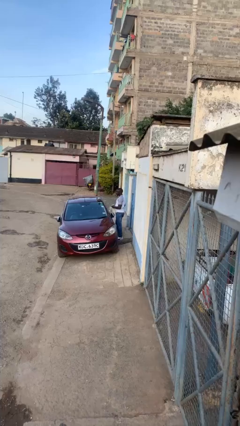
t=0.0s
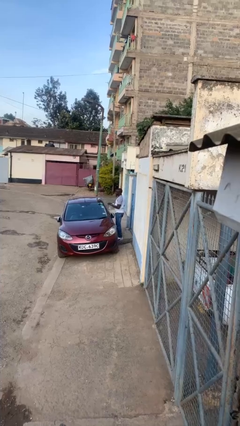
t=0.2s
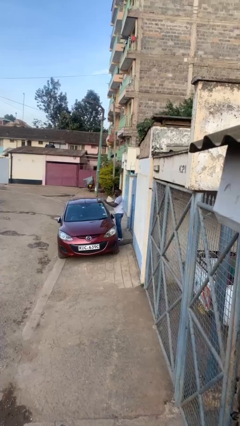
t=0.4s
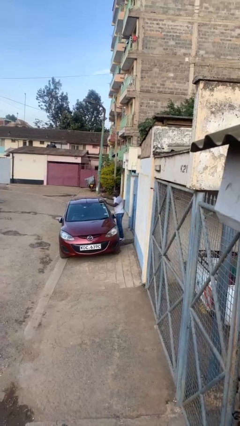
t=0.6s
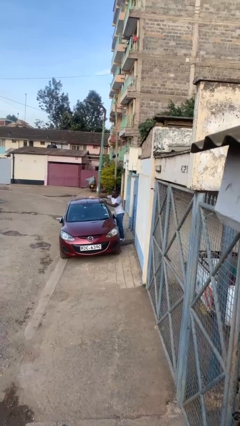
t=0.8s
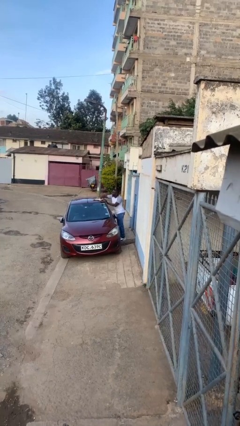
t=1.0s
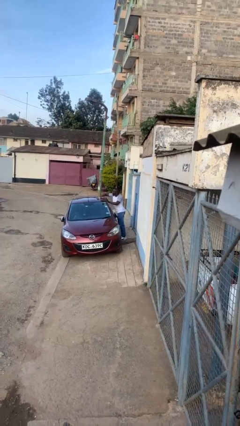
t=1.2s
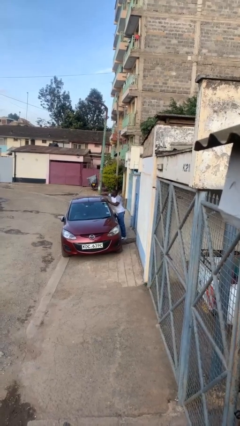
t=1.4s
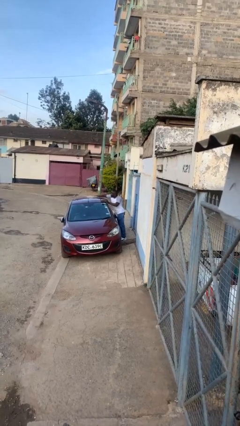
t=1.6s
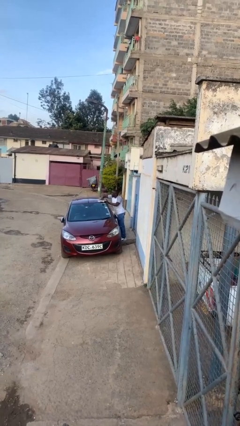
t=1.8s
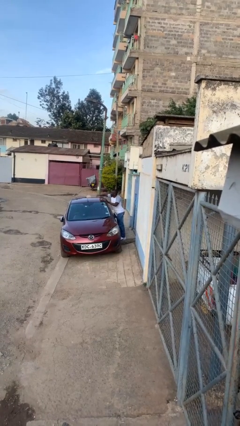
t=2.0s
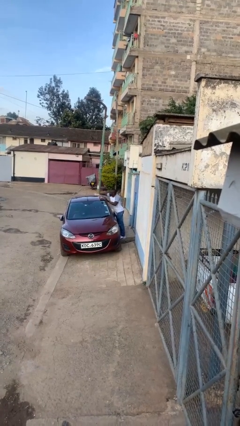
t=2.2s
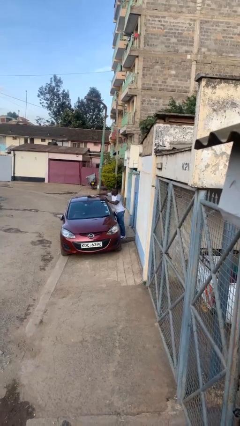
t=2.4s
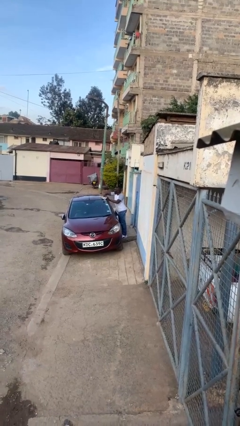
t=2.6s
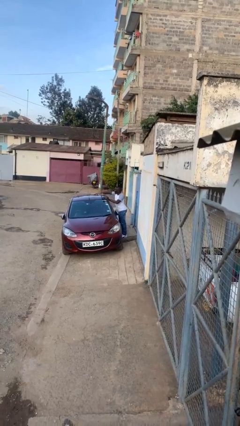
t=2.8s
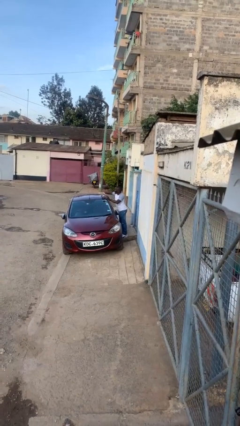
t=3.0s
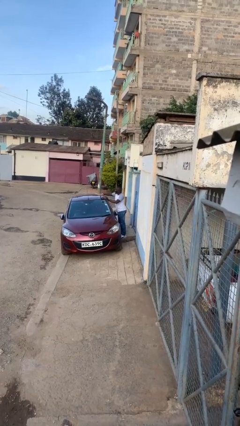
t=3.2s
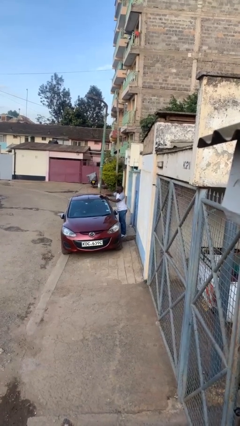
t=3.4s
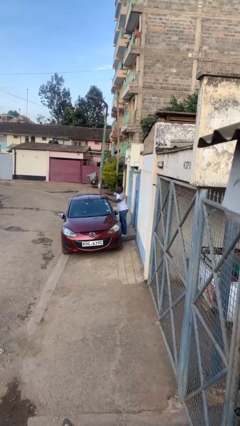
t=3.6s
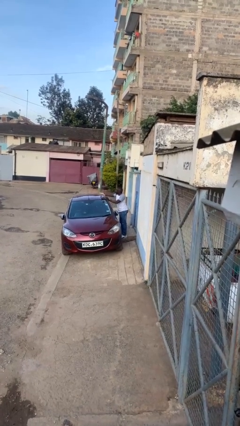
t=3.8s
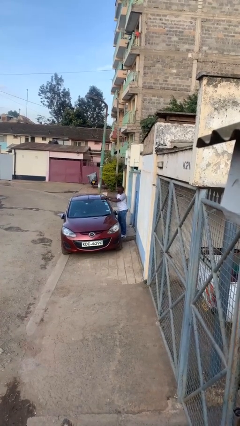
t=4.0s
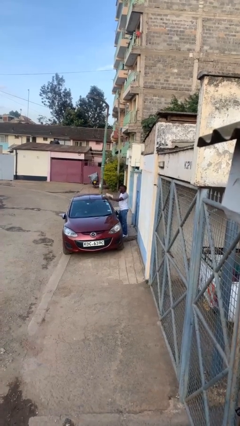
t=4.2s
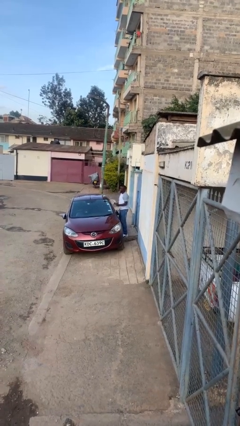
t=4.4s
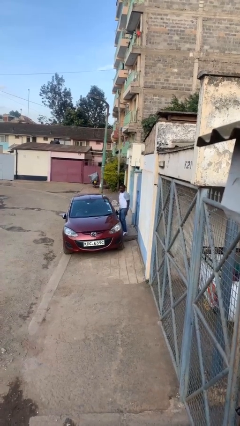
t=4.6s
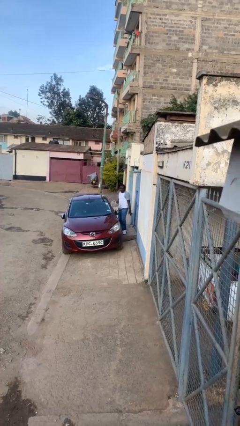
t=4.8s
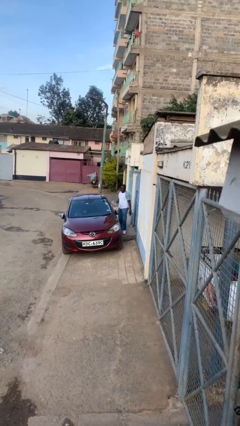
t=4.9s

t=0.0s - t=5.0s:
person polishes car with rag

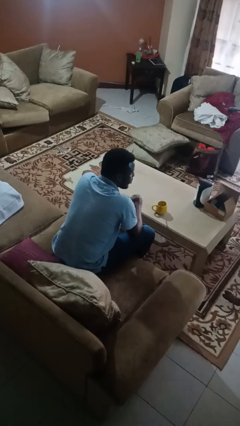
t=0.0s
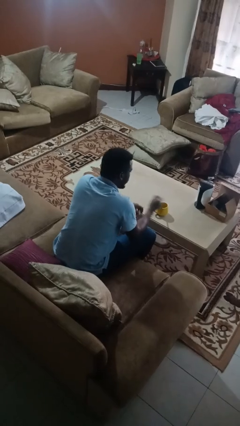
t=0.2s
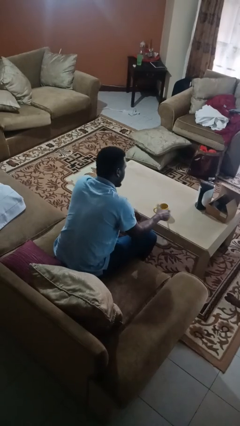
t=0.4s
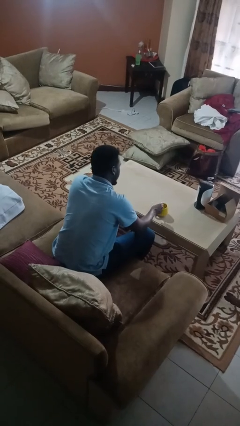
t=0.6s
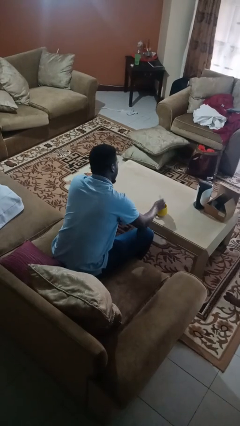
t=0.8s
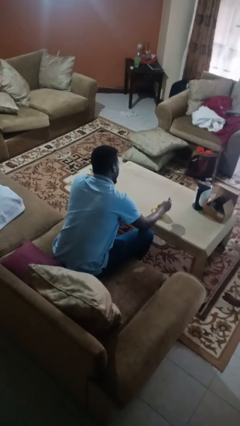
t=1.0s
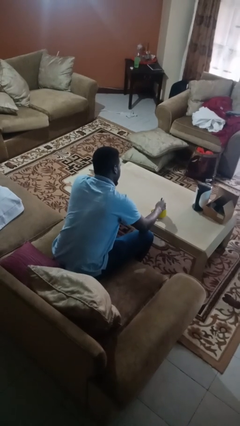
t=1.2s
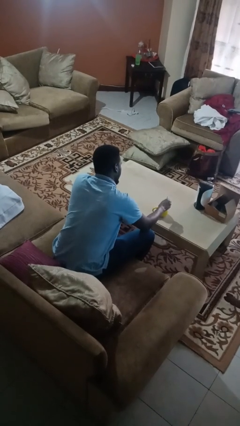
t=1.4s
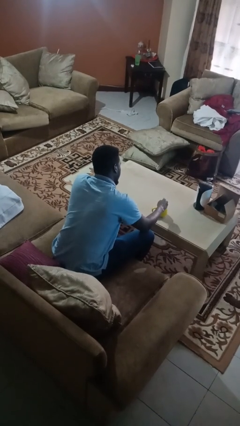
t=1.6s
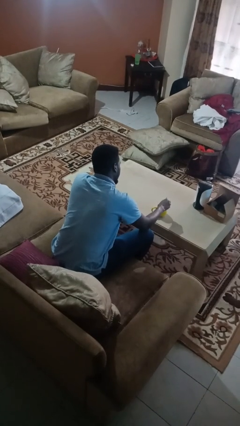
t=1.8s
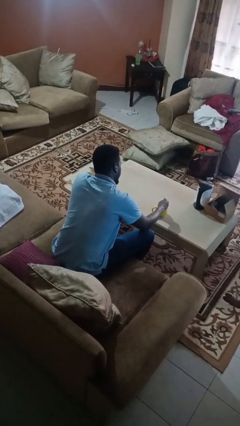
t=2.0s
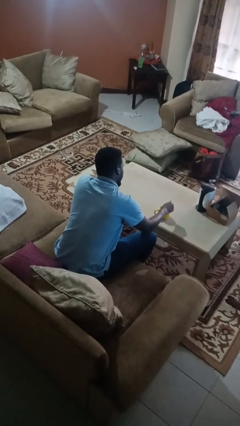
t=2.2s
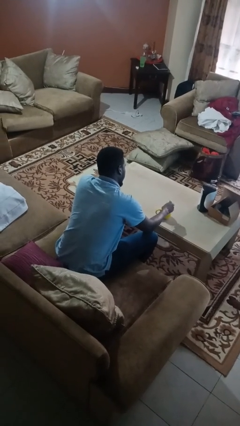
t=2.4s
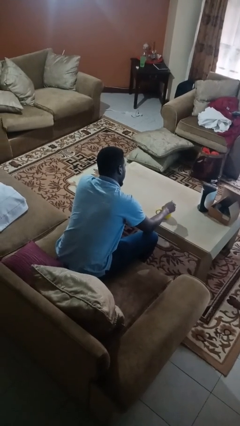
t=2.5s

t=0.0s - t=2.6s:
person stirs mug

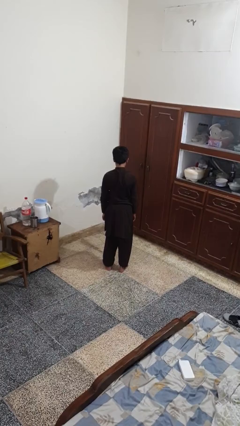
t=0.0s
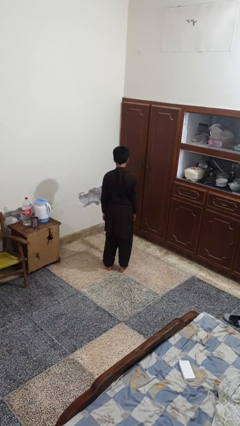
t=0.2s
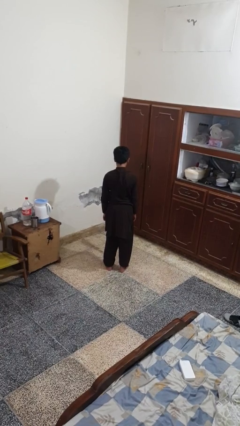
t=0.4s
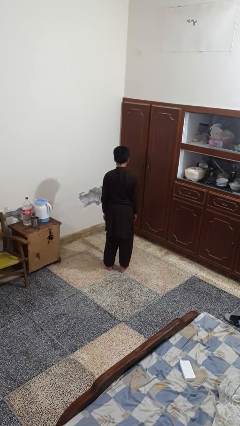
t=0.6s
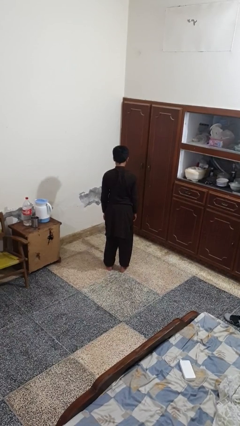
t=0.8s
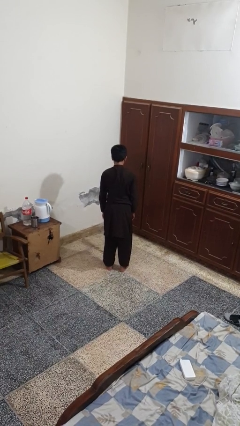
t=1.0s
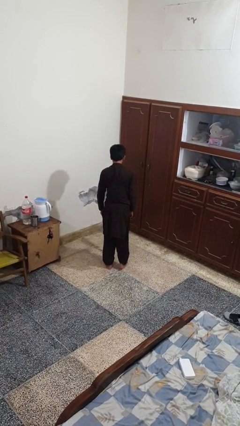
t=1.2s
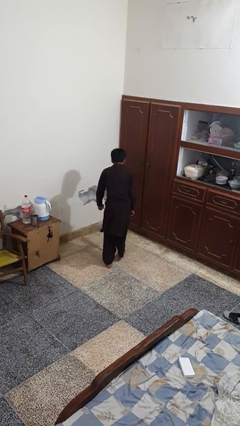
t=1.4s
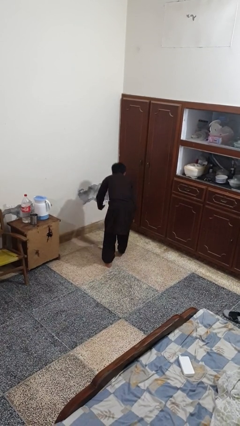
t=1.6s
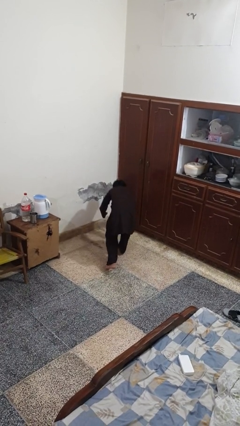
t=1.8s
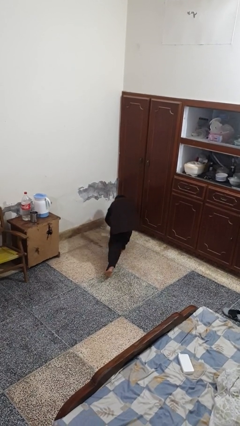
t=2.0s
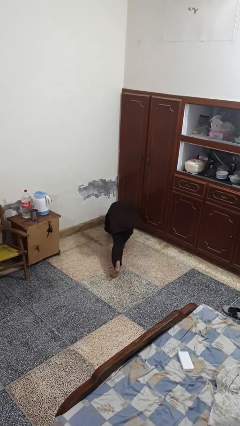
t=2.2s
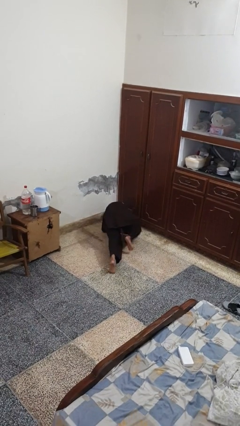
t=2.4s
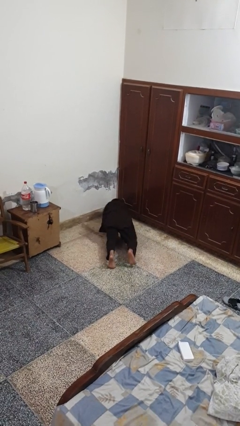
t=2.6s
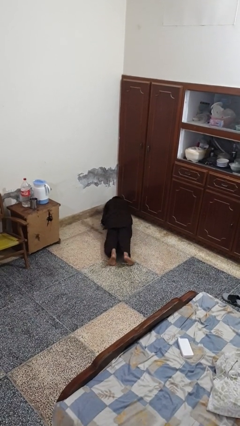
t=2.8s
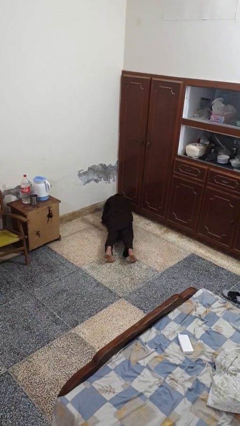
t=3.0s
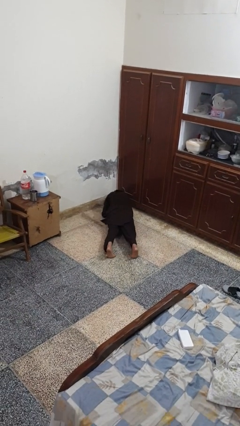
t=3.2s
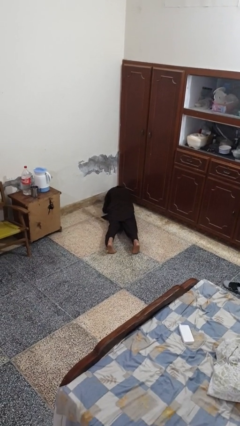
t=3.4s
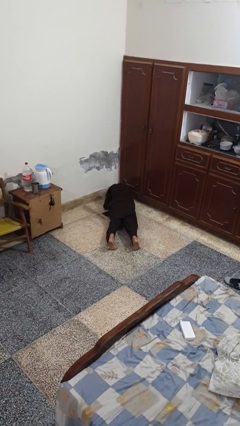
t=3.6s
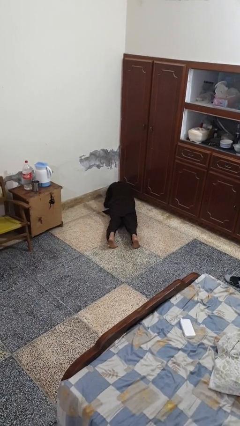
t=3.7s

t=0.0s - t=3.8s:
person exercises with plank

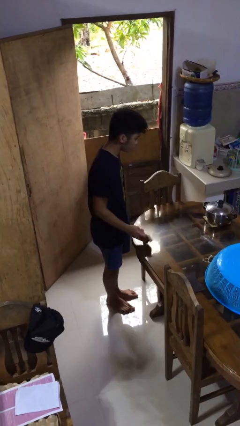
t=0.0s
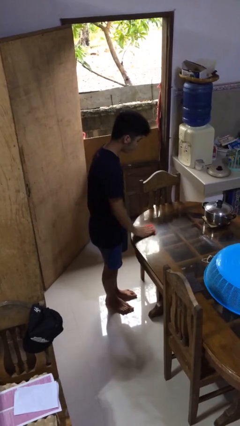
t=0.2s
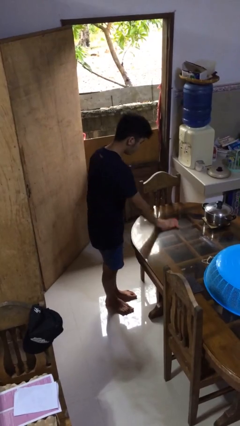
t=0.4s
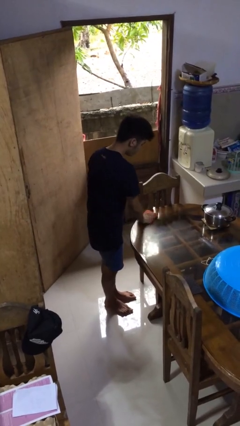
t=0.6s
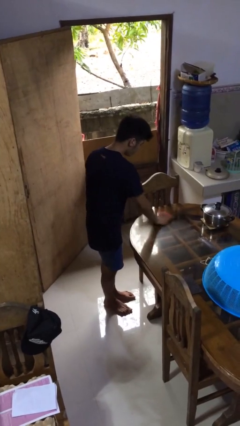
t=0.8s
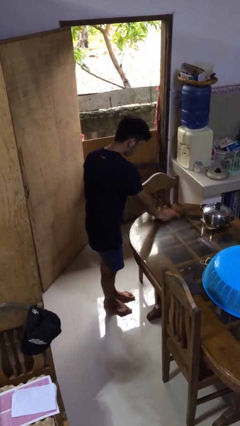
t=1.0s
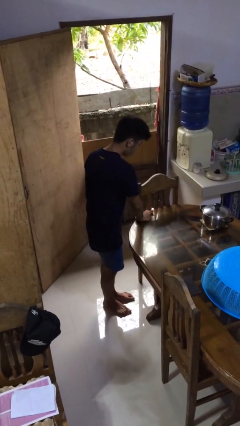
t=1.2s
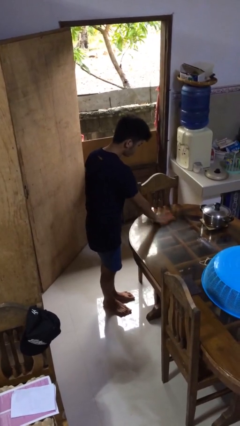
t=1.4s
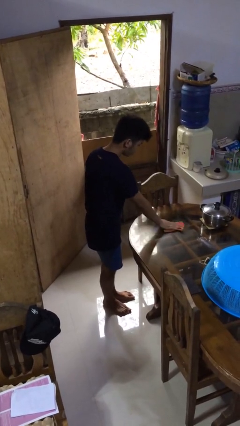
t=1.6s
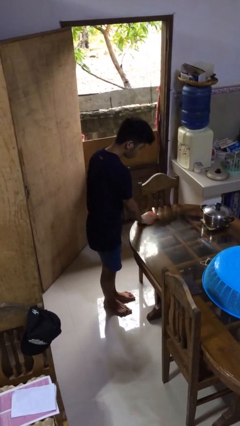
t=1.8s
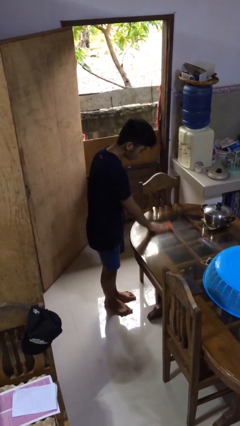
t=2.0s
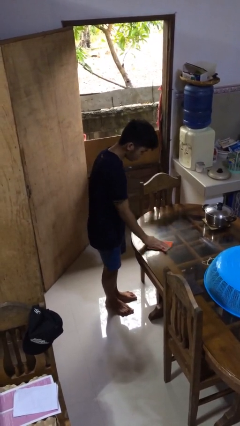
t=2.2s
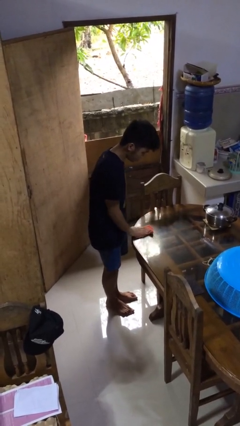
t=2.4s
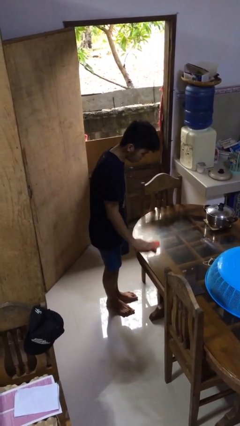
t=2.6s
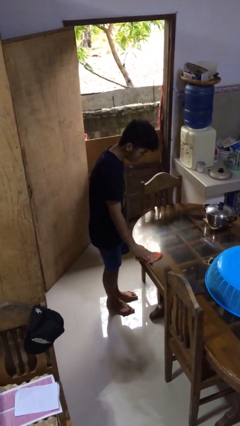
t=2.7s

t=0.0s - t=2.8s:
person cleans table with rag

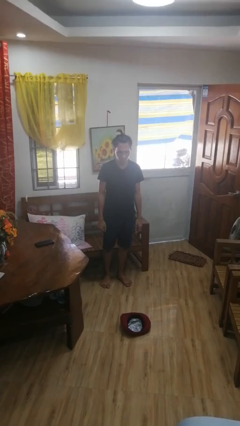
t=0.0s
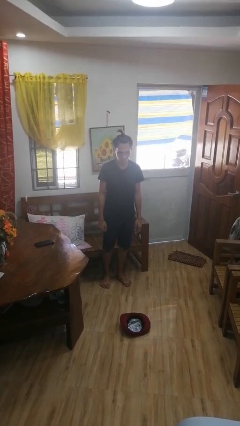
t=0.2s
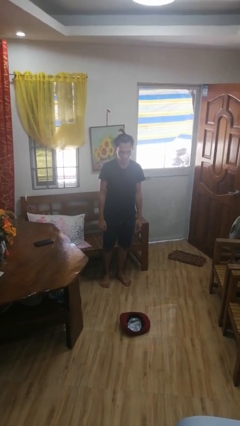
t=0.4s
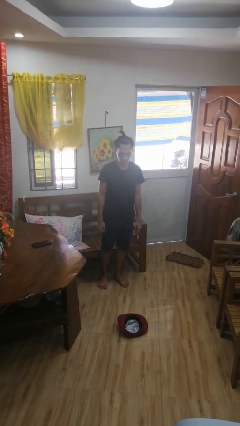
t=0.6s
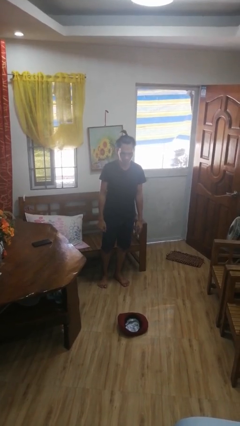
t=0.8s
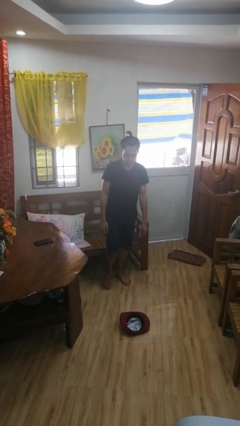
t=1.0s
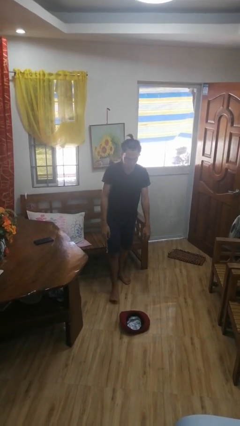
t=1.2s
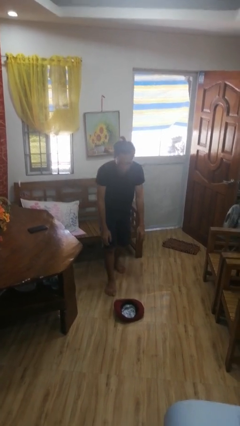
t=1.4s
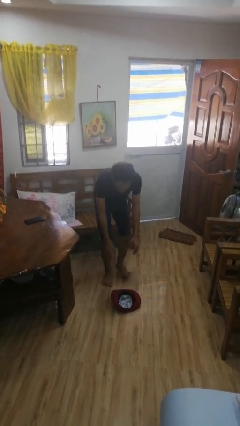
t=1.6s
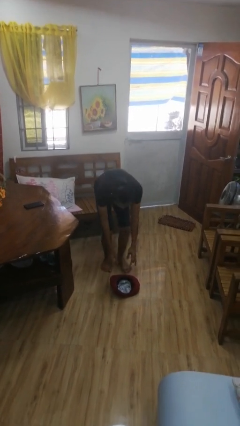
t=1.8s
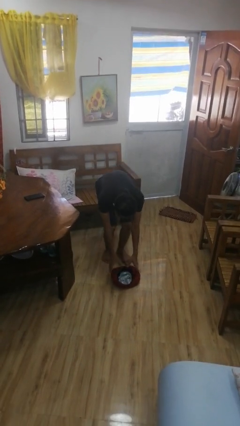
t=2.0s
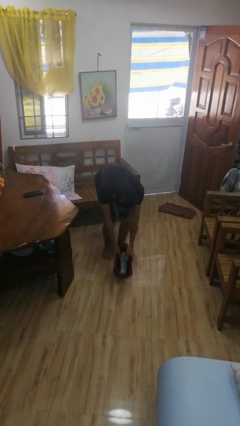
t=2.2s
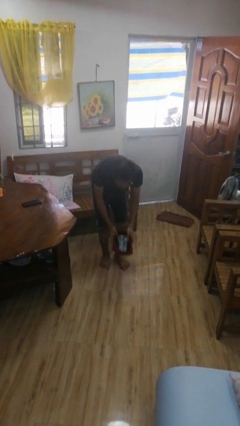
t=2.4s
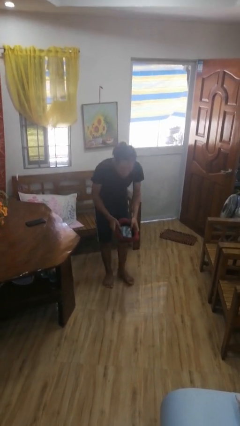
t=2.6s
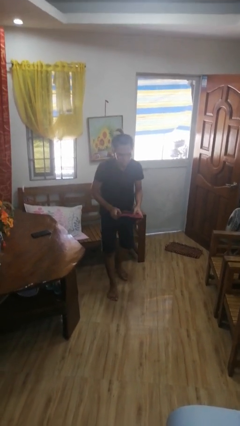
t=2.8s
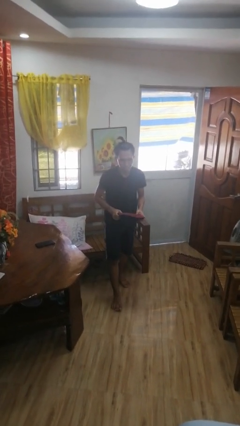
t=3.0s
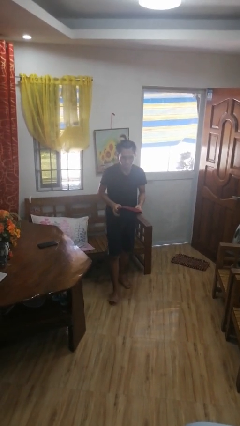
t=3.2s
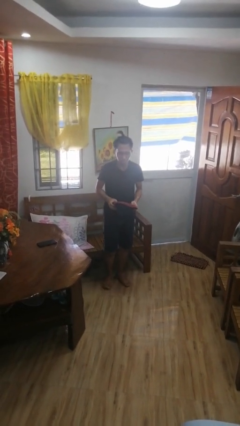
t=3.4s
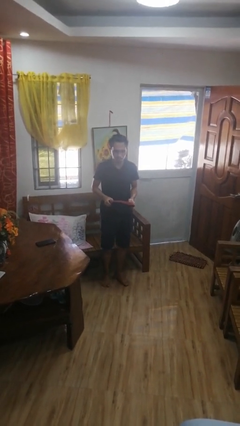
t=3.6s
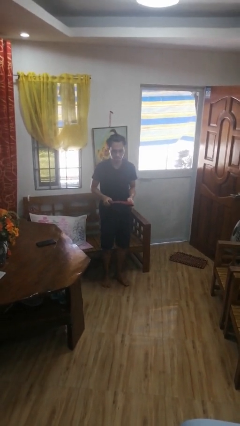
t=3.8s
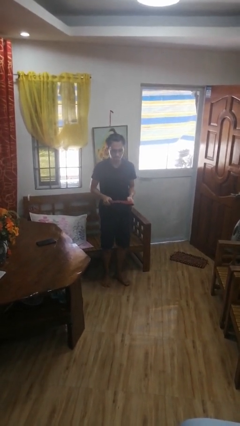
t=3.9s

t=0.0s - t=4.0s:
person picks up object from floor
